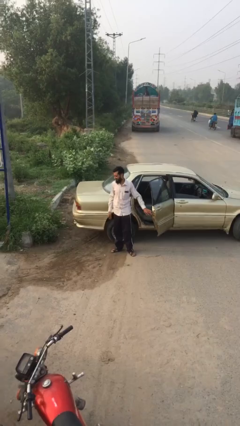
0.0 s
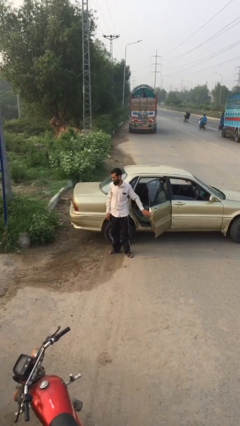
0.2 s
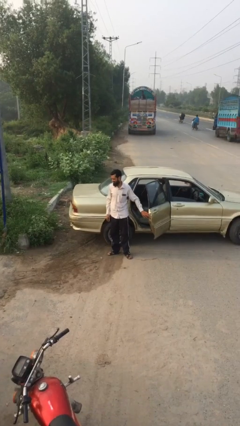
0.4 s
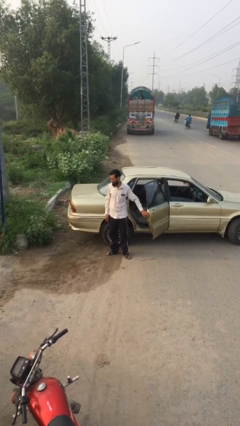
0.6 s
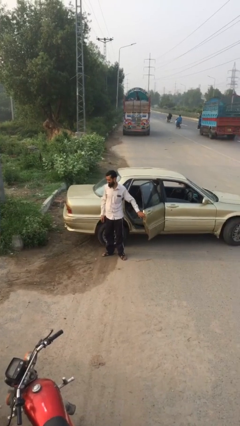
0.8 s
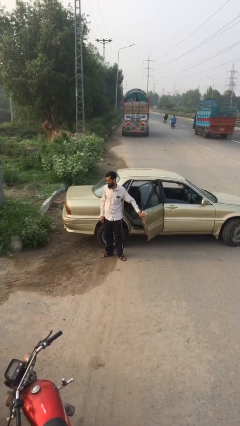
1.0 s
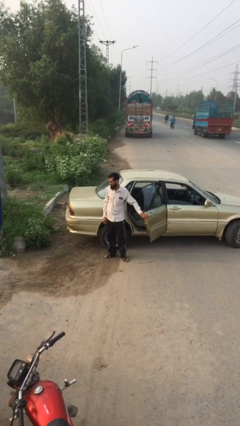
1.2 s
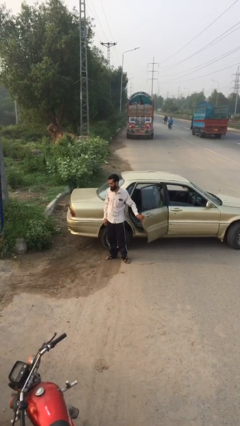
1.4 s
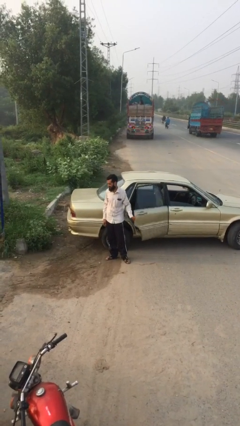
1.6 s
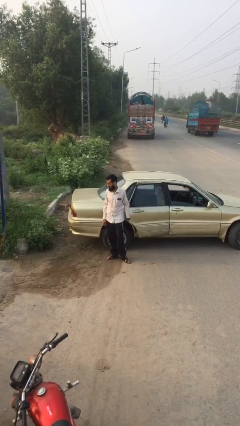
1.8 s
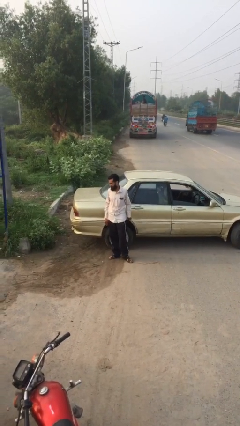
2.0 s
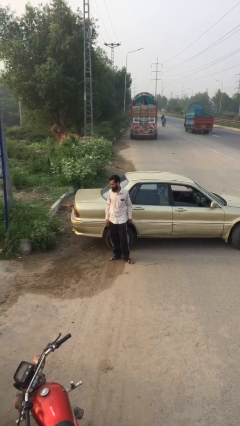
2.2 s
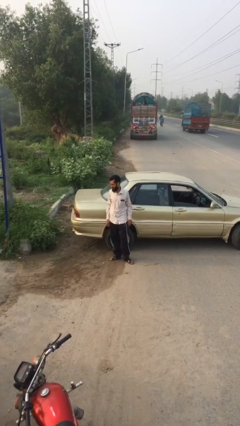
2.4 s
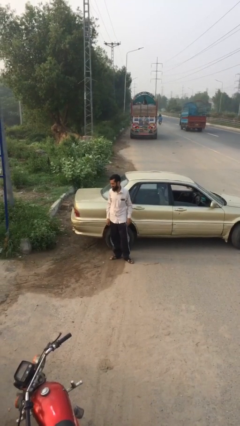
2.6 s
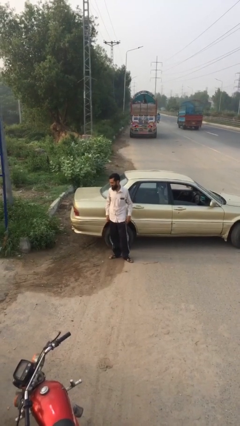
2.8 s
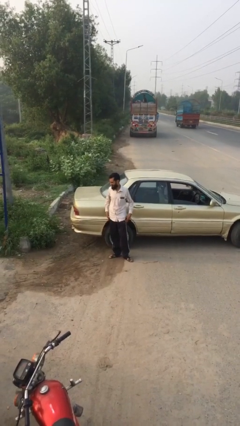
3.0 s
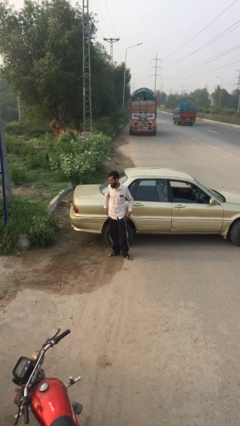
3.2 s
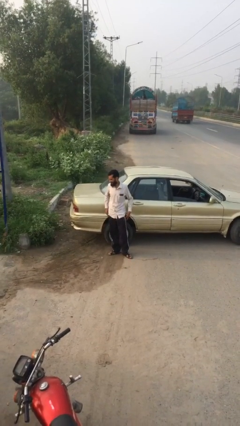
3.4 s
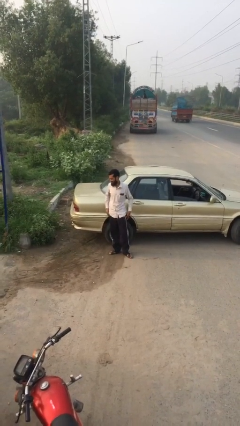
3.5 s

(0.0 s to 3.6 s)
person closes car door

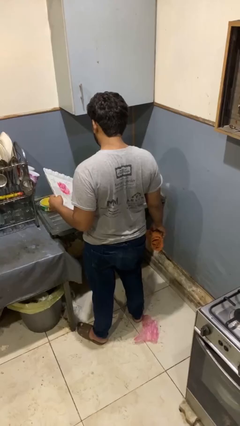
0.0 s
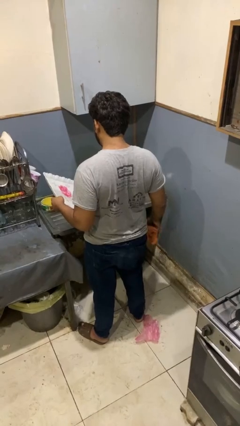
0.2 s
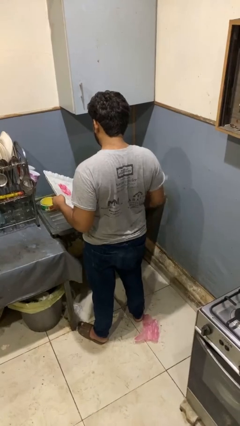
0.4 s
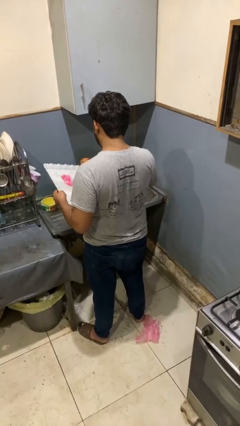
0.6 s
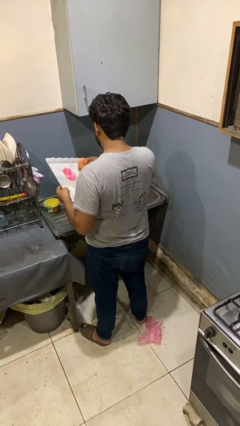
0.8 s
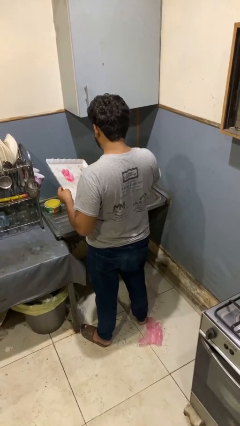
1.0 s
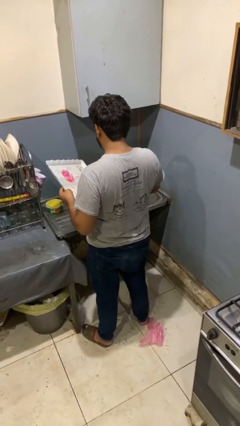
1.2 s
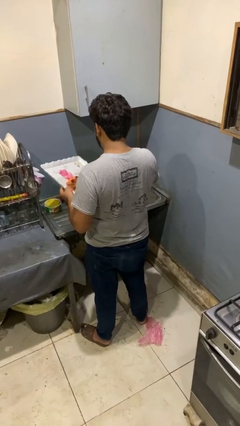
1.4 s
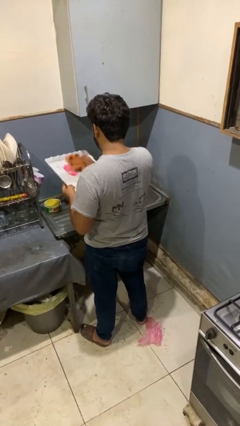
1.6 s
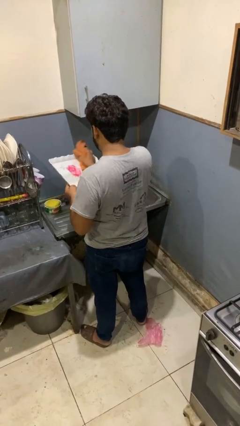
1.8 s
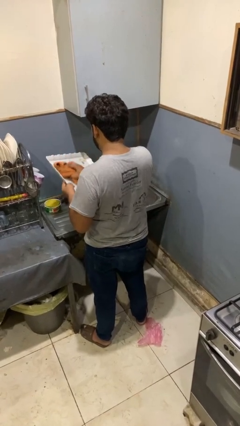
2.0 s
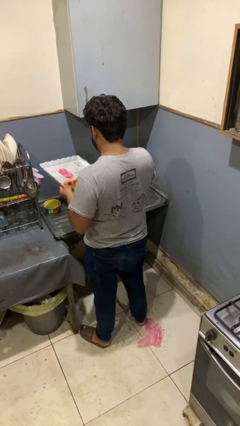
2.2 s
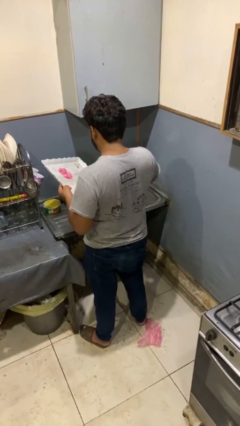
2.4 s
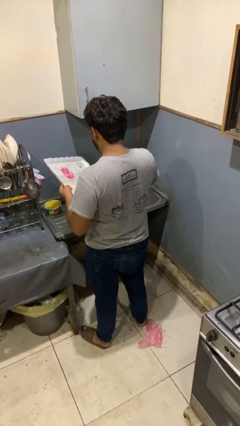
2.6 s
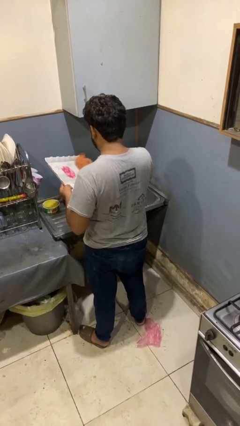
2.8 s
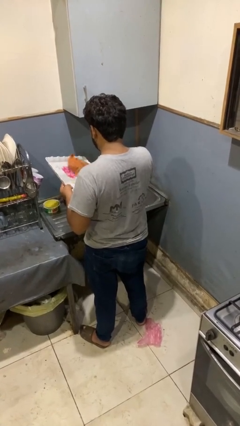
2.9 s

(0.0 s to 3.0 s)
person dries dish

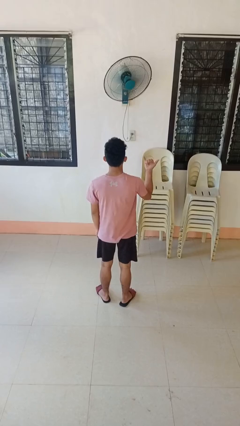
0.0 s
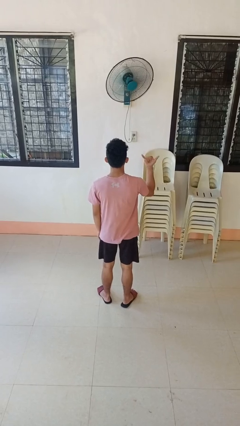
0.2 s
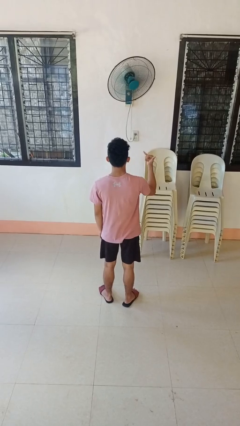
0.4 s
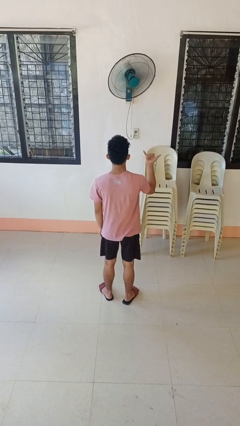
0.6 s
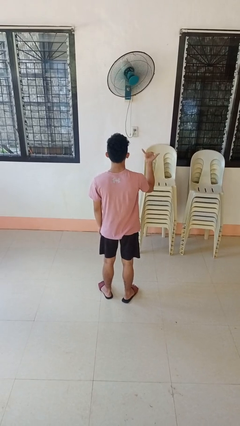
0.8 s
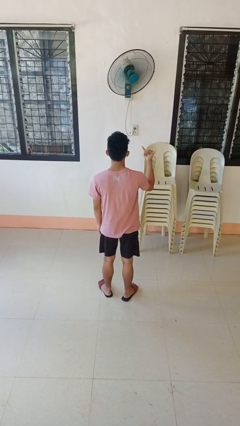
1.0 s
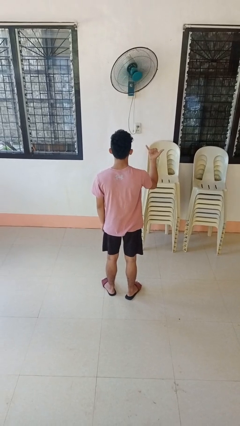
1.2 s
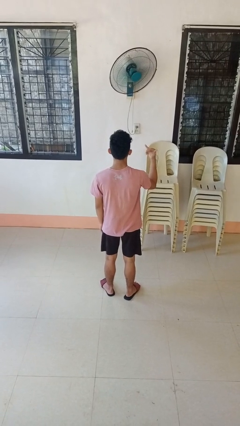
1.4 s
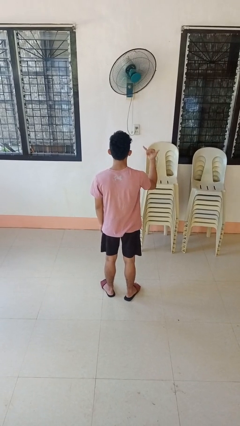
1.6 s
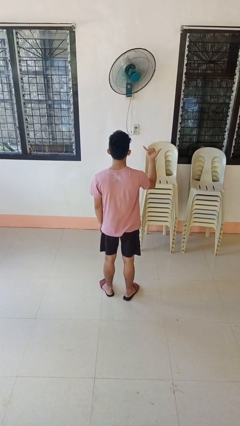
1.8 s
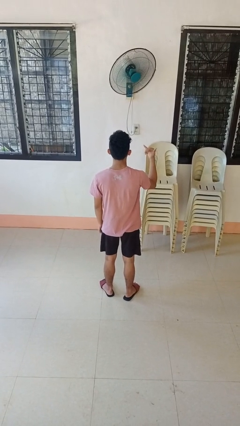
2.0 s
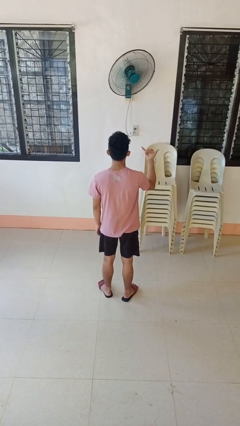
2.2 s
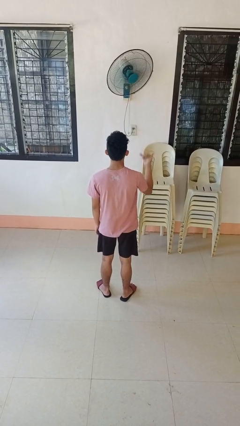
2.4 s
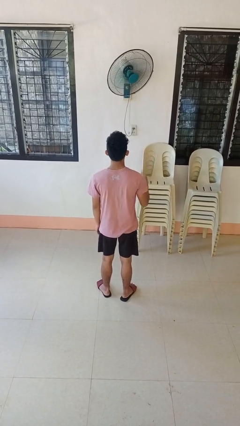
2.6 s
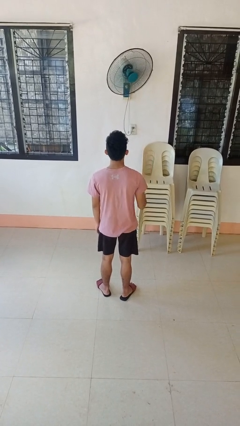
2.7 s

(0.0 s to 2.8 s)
person gestures hang loose

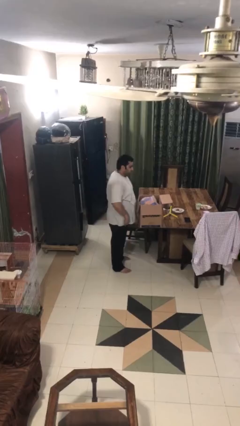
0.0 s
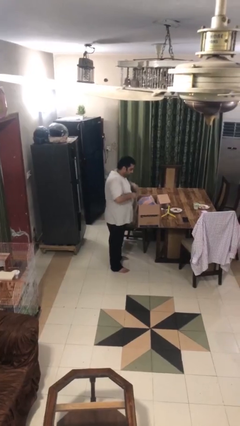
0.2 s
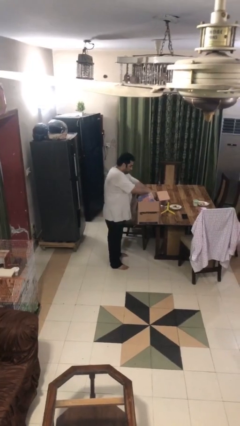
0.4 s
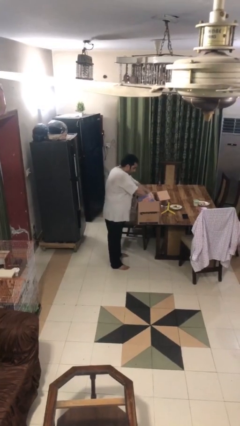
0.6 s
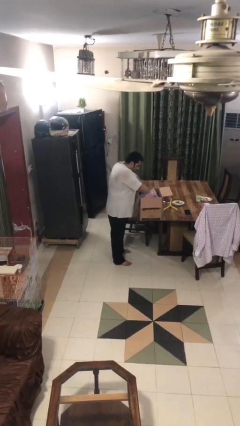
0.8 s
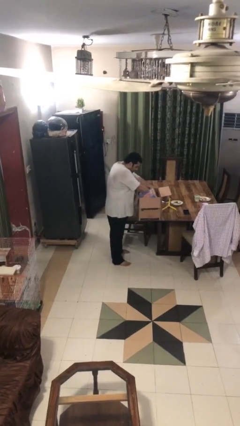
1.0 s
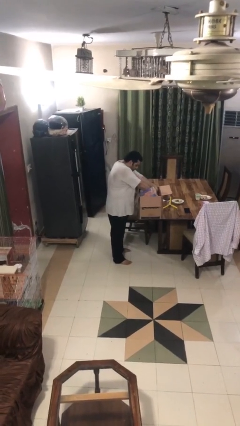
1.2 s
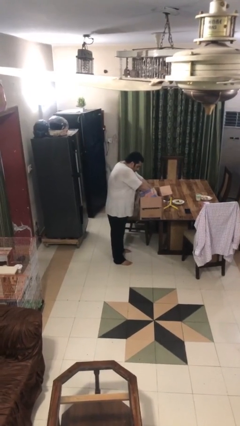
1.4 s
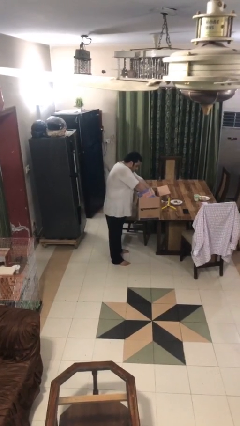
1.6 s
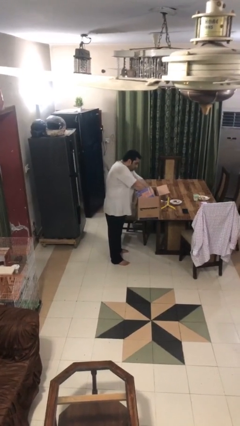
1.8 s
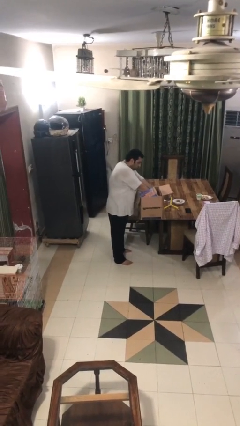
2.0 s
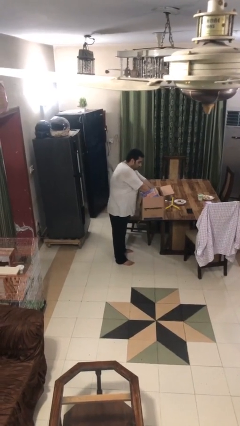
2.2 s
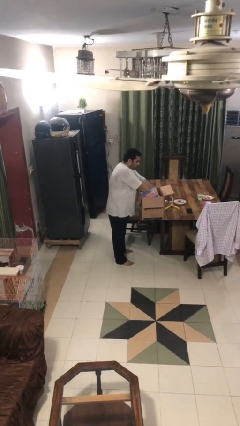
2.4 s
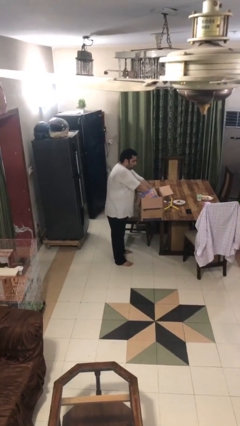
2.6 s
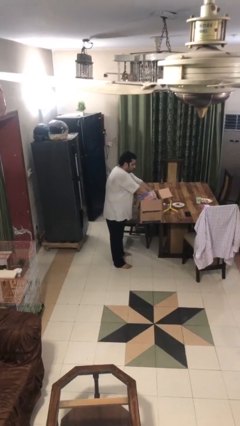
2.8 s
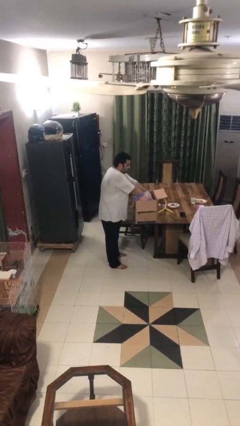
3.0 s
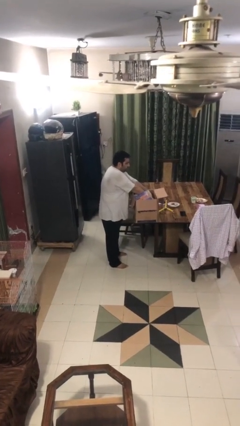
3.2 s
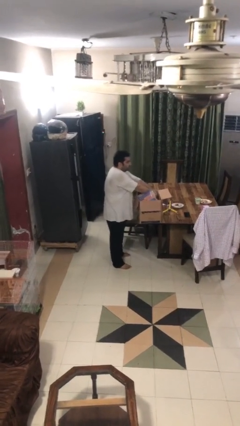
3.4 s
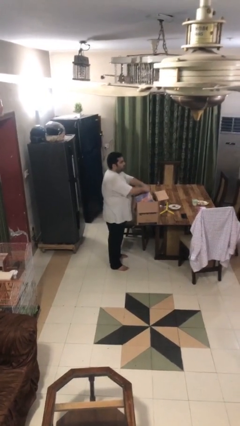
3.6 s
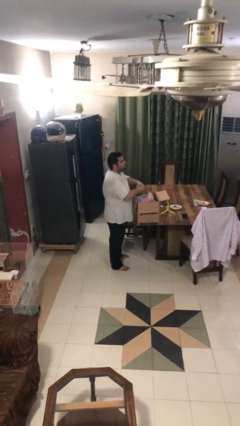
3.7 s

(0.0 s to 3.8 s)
person searches in box

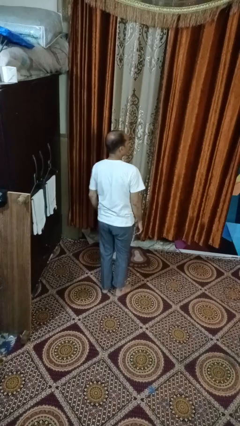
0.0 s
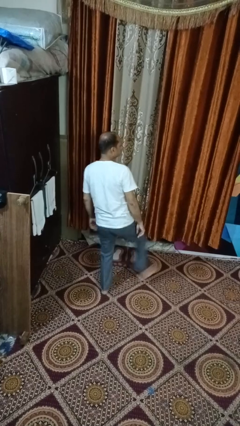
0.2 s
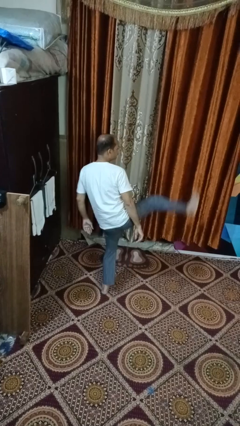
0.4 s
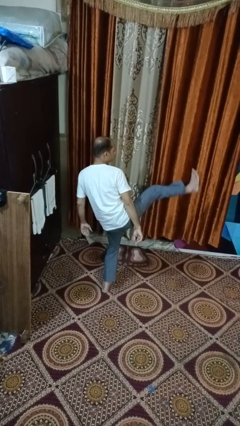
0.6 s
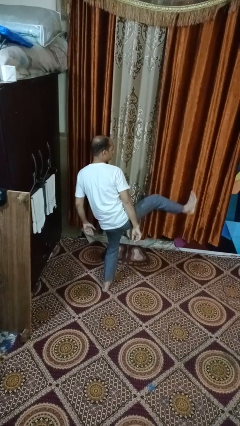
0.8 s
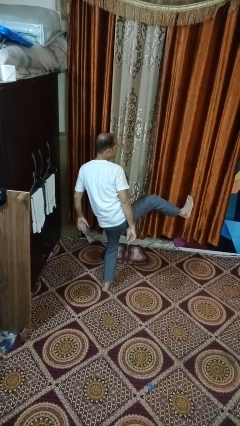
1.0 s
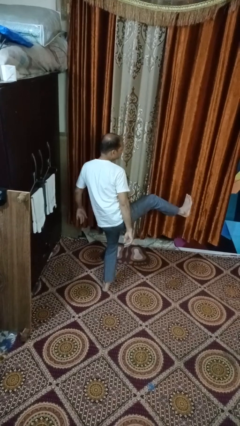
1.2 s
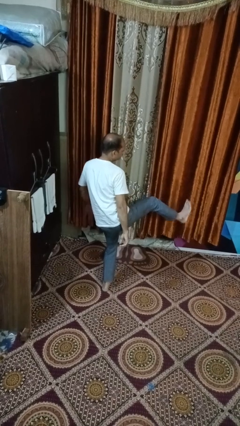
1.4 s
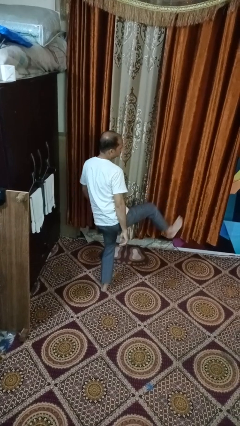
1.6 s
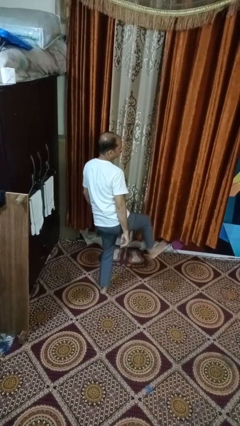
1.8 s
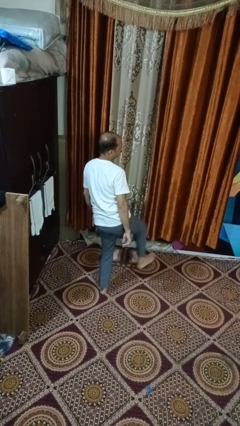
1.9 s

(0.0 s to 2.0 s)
person karate kicks

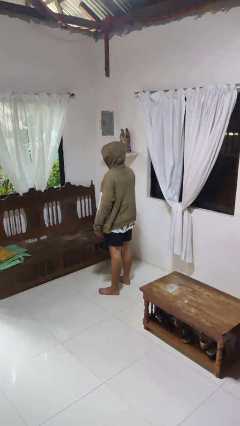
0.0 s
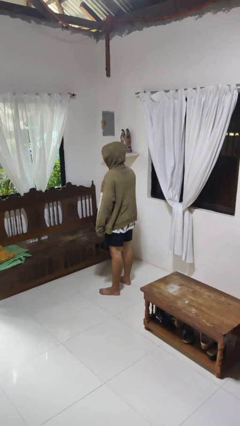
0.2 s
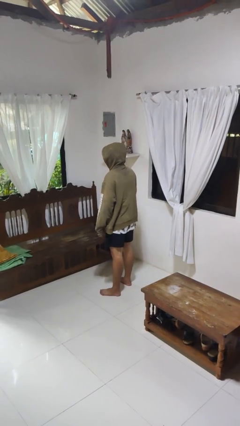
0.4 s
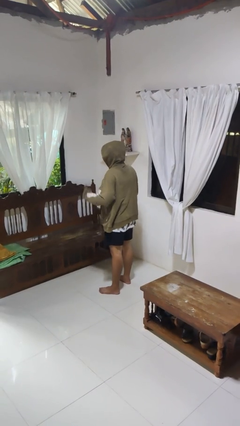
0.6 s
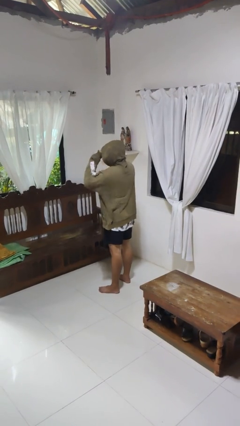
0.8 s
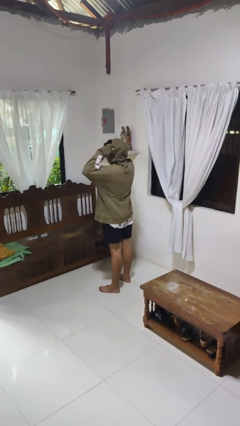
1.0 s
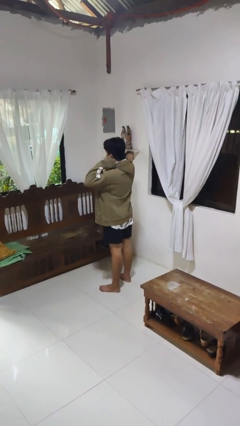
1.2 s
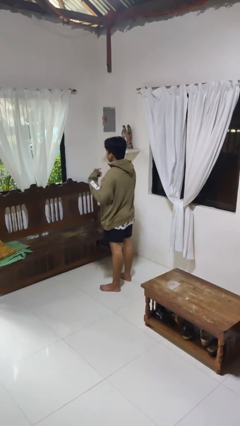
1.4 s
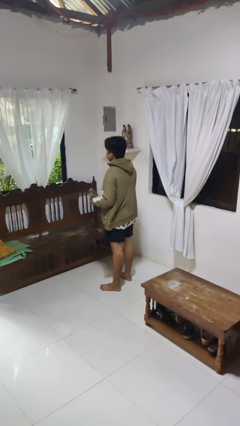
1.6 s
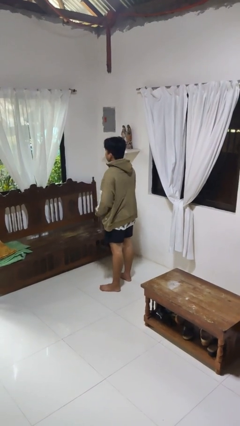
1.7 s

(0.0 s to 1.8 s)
person takes off hoodie

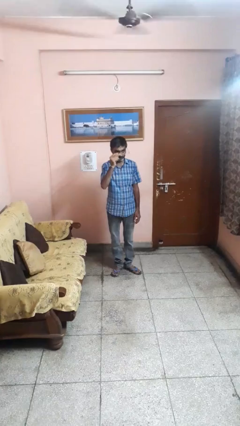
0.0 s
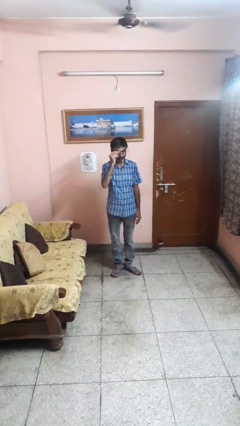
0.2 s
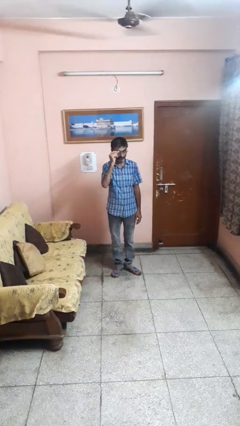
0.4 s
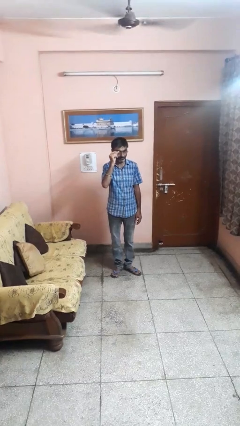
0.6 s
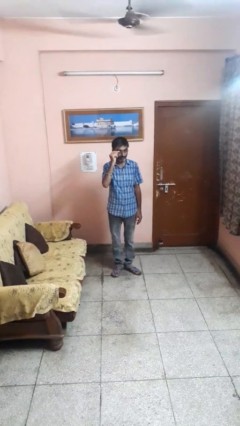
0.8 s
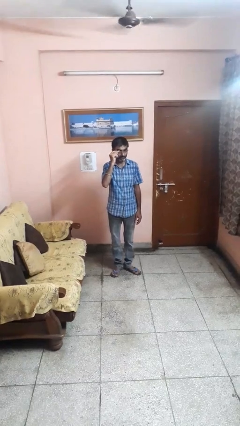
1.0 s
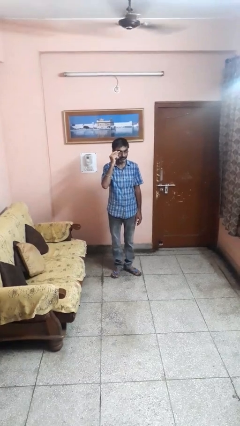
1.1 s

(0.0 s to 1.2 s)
person puts on glasses
